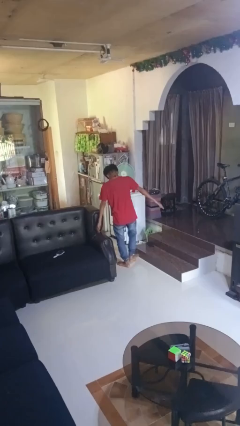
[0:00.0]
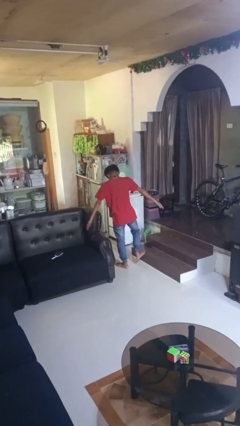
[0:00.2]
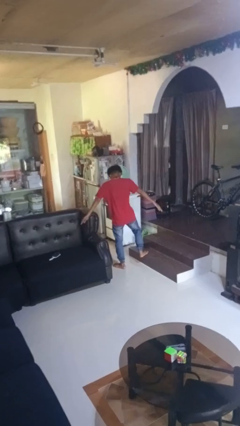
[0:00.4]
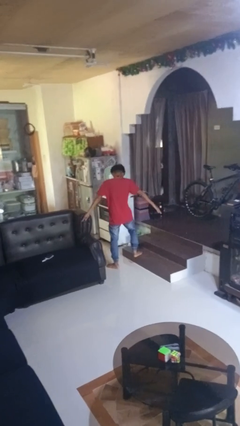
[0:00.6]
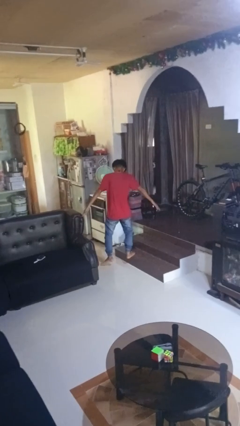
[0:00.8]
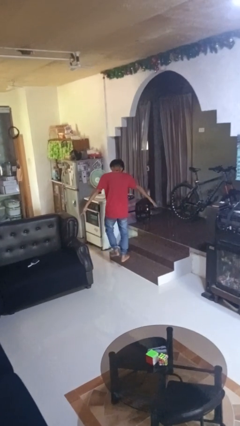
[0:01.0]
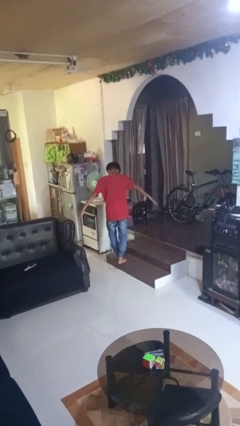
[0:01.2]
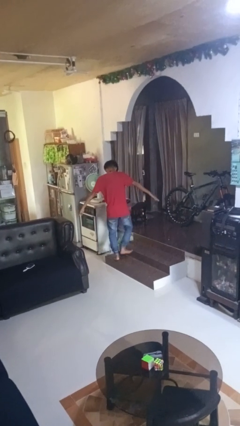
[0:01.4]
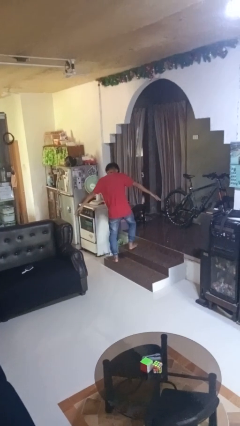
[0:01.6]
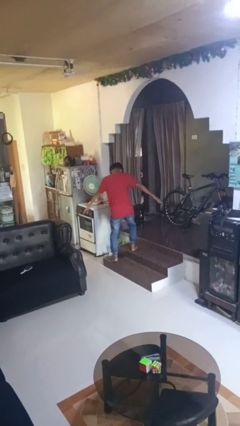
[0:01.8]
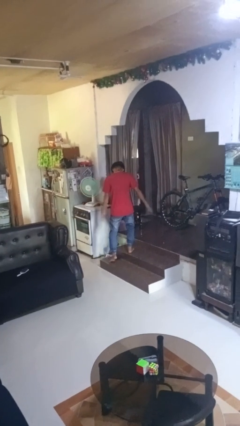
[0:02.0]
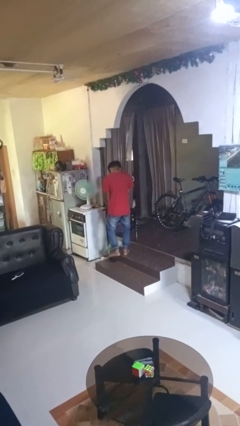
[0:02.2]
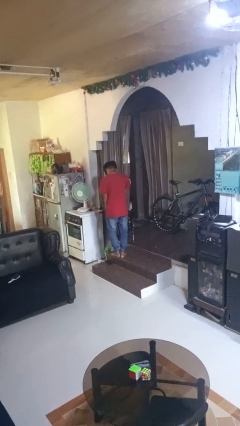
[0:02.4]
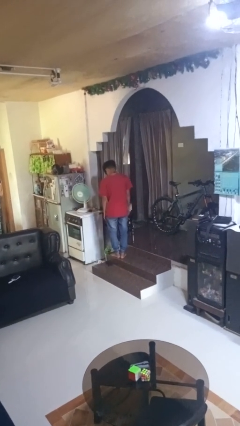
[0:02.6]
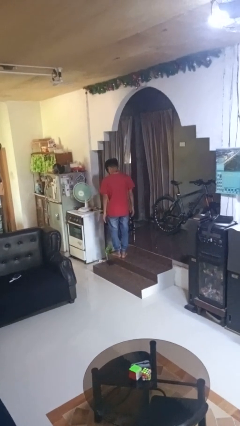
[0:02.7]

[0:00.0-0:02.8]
person walks tiptoe

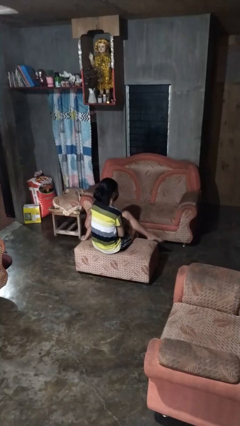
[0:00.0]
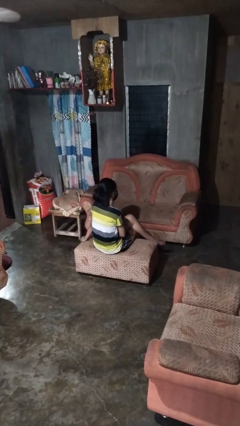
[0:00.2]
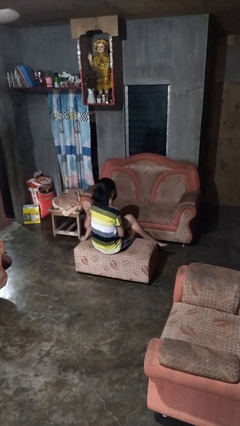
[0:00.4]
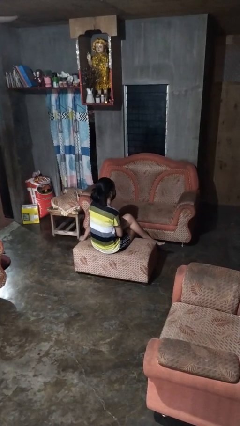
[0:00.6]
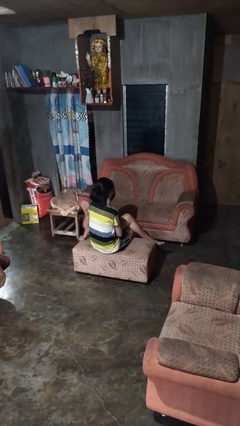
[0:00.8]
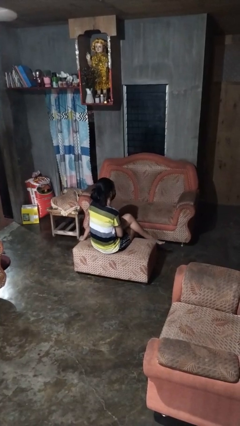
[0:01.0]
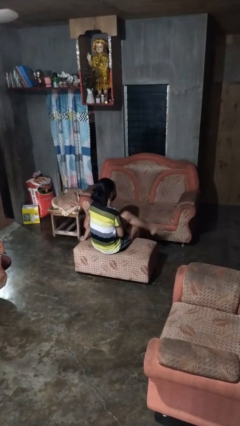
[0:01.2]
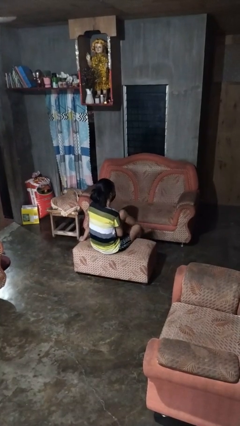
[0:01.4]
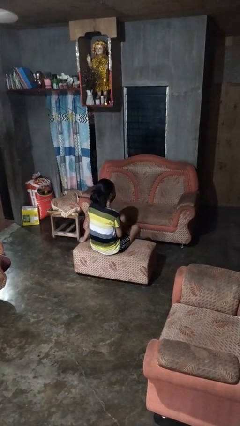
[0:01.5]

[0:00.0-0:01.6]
person crosses legs

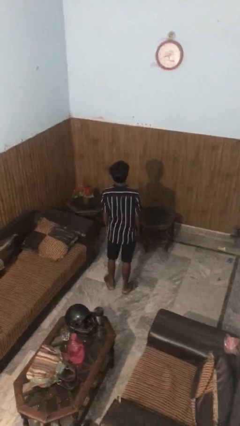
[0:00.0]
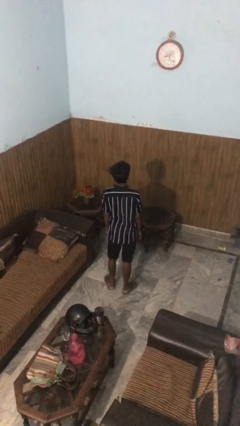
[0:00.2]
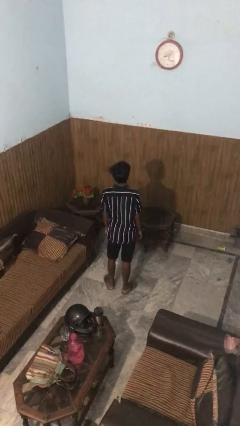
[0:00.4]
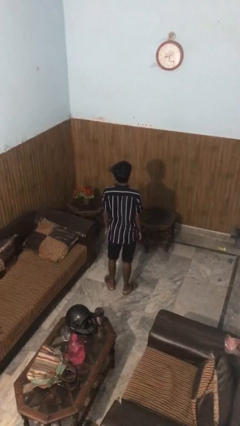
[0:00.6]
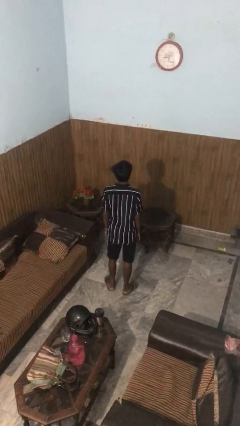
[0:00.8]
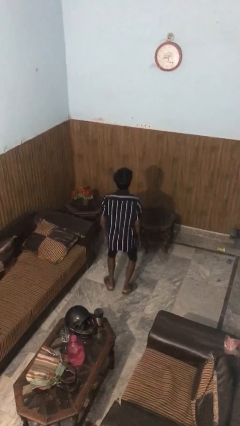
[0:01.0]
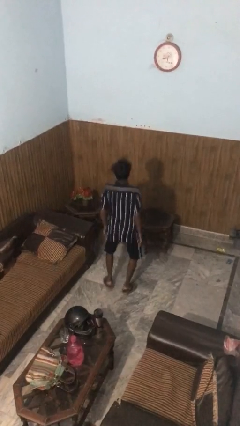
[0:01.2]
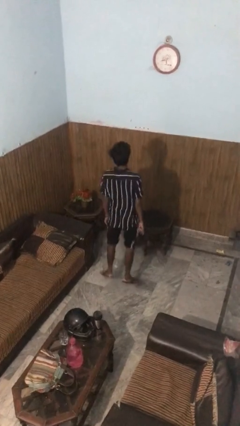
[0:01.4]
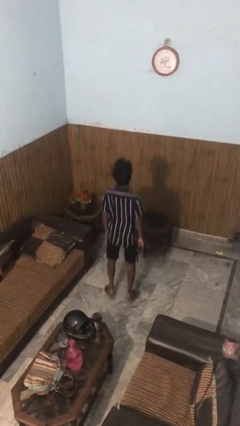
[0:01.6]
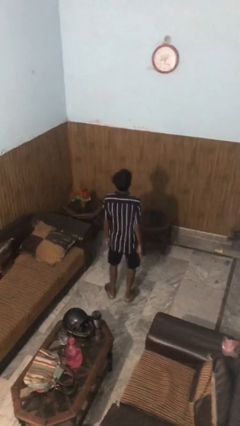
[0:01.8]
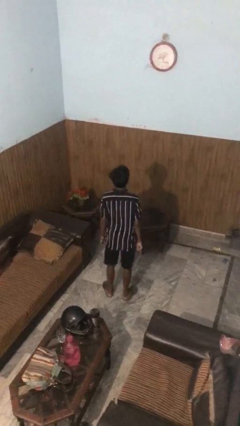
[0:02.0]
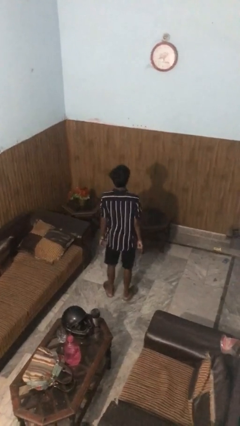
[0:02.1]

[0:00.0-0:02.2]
person jumps

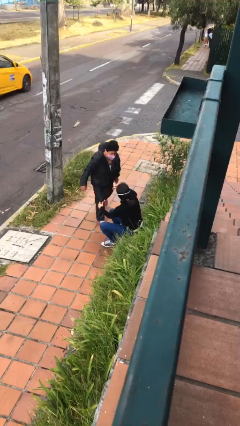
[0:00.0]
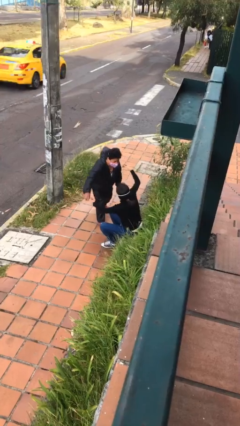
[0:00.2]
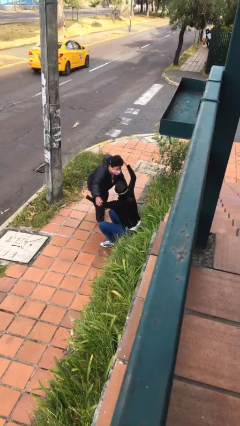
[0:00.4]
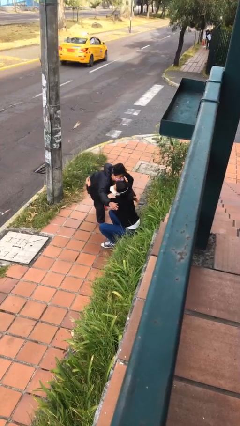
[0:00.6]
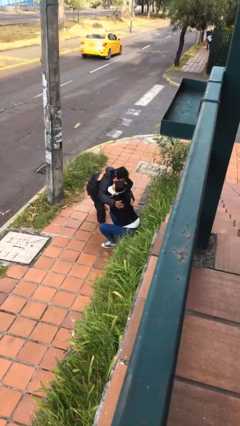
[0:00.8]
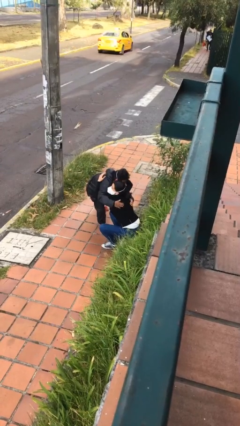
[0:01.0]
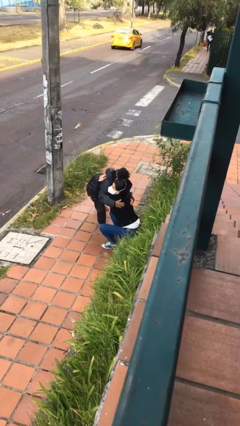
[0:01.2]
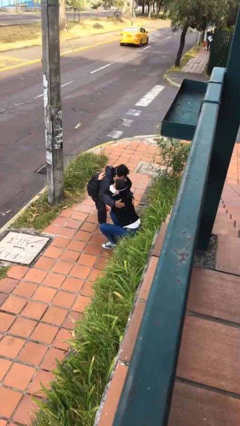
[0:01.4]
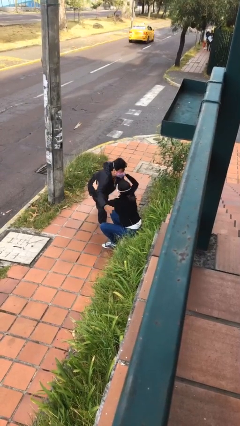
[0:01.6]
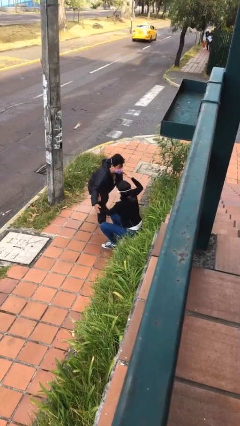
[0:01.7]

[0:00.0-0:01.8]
person embraces person

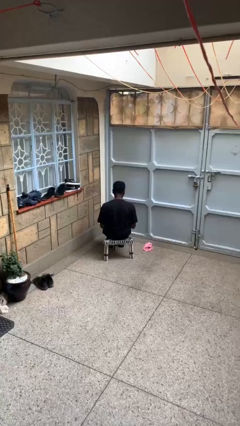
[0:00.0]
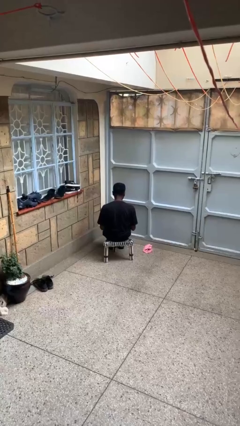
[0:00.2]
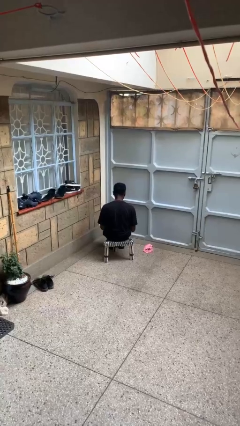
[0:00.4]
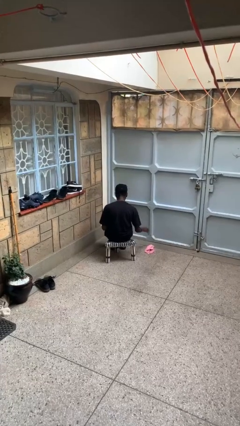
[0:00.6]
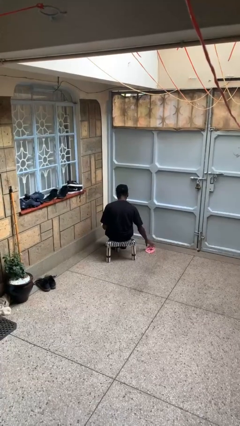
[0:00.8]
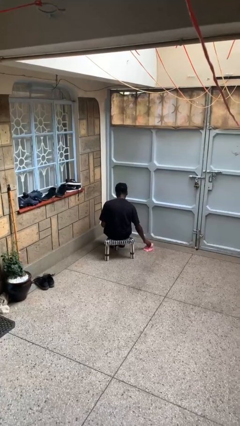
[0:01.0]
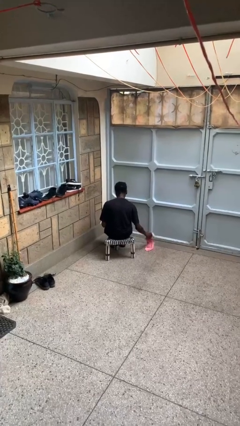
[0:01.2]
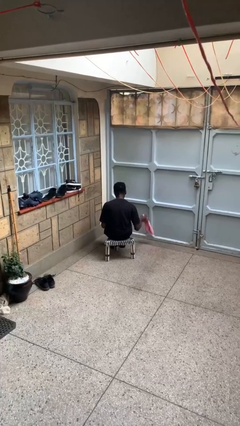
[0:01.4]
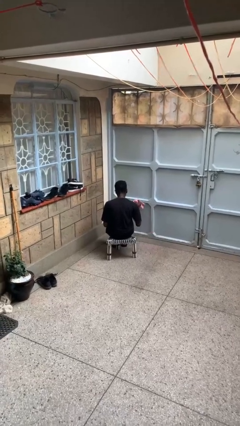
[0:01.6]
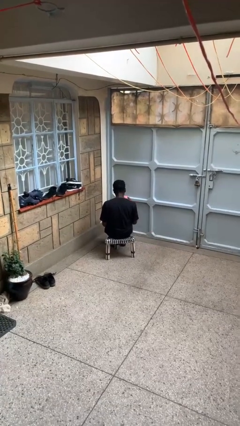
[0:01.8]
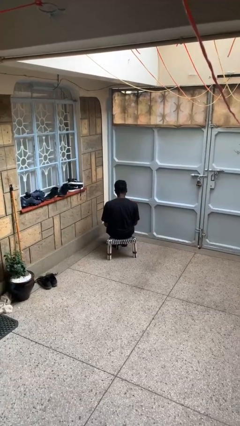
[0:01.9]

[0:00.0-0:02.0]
person picks up object from floor

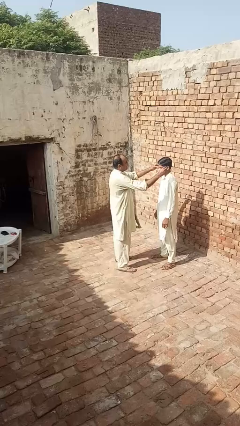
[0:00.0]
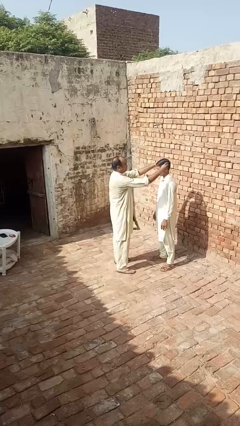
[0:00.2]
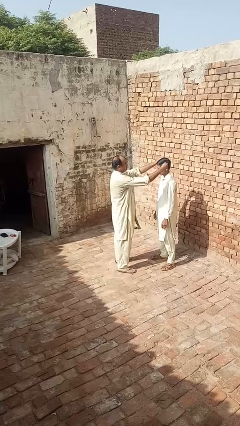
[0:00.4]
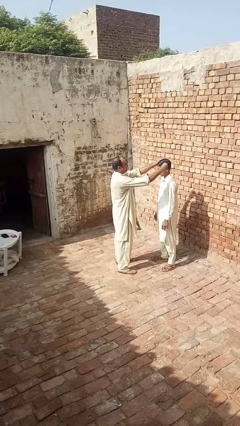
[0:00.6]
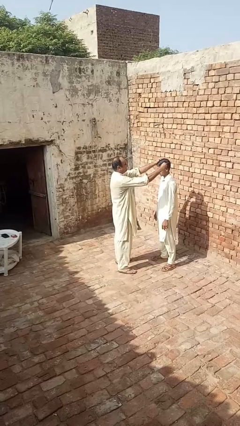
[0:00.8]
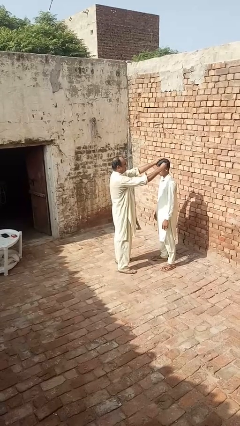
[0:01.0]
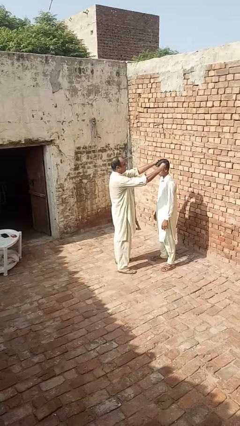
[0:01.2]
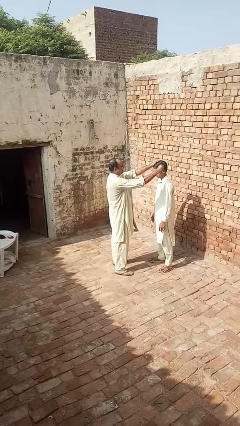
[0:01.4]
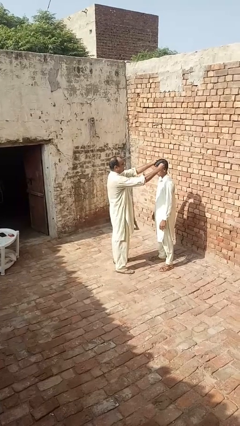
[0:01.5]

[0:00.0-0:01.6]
person grabs person by hair

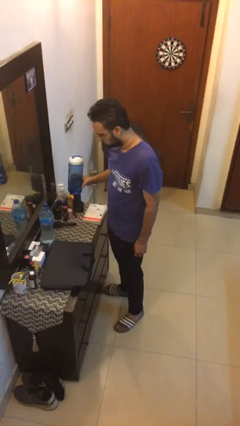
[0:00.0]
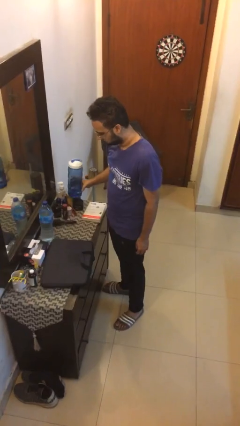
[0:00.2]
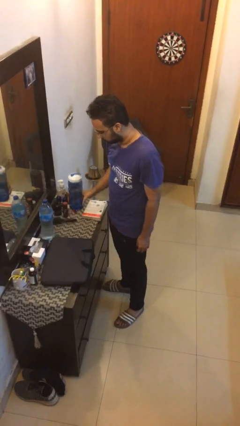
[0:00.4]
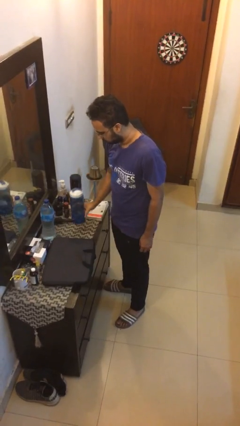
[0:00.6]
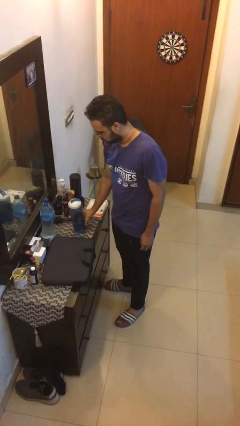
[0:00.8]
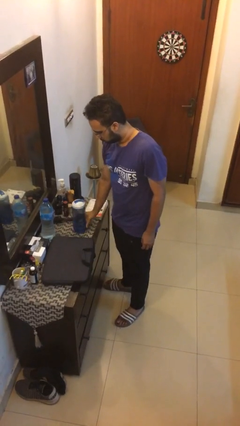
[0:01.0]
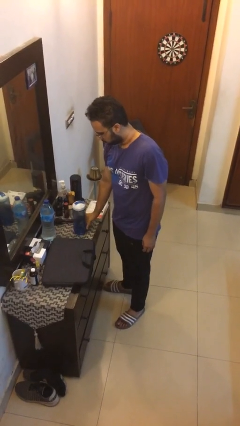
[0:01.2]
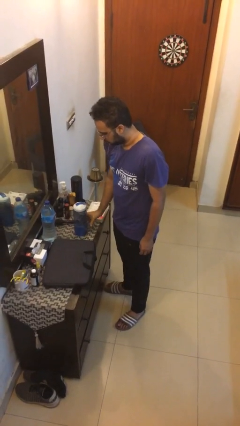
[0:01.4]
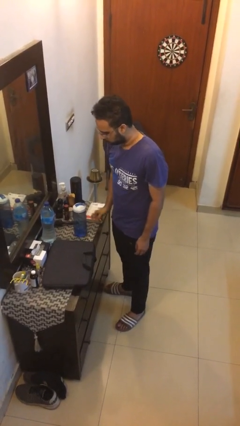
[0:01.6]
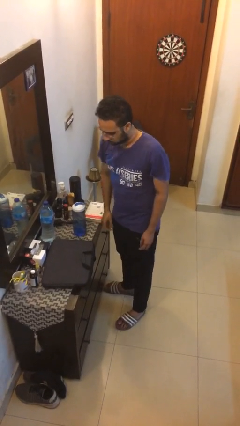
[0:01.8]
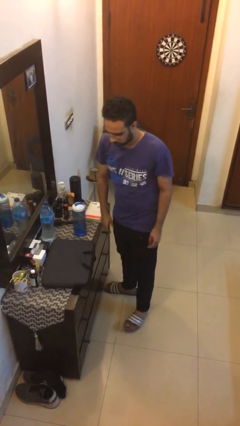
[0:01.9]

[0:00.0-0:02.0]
person puts down object on table

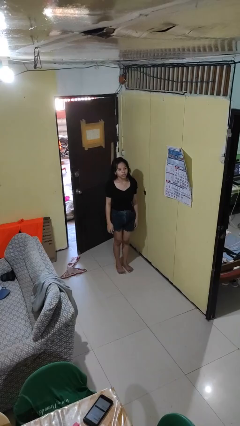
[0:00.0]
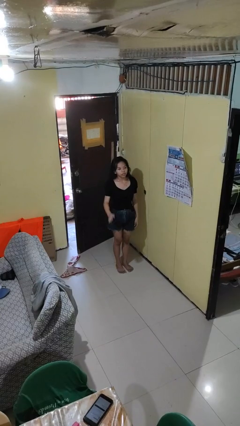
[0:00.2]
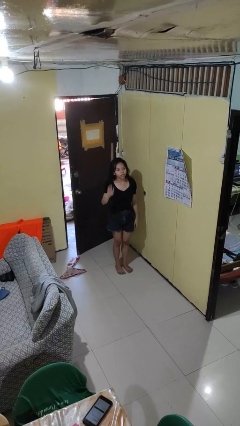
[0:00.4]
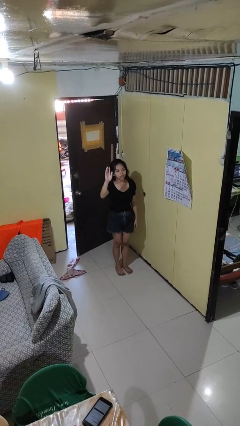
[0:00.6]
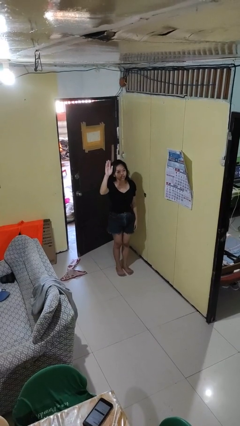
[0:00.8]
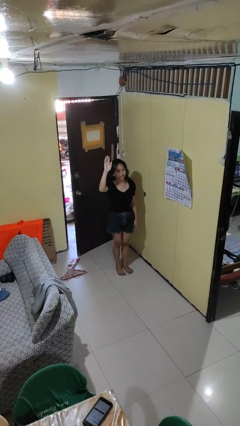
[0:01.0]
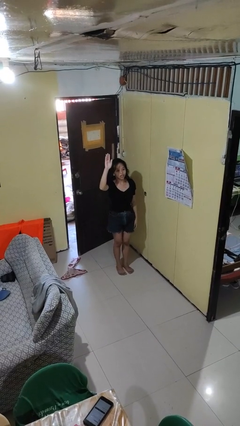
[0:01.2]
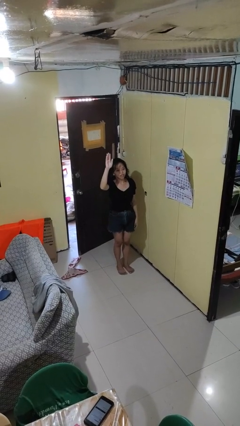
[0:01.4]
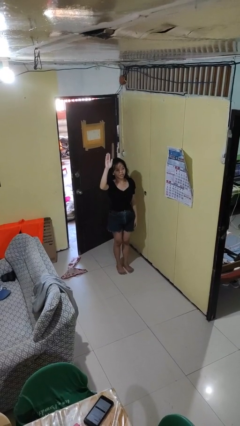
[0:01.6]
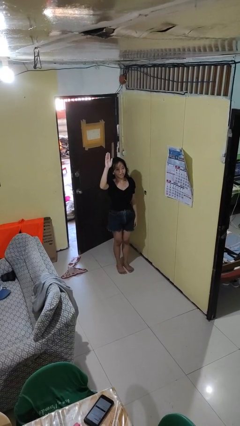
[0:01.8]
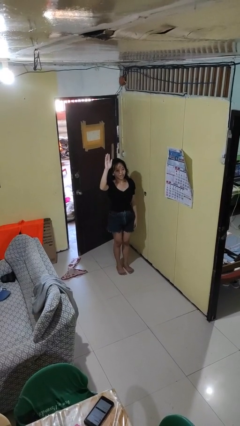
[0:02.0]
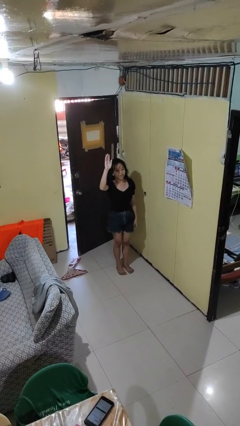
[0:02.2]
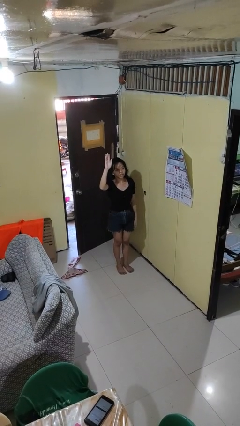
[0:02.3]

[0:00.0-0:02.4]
person gestures raise hand

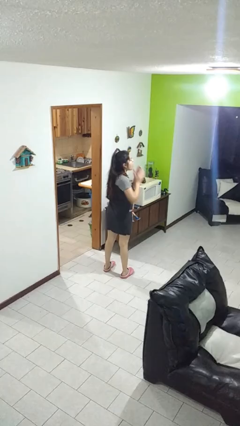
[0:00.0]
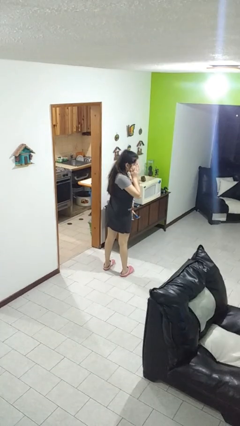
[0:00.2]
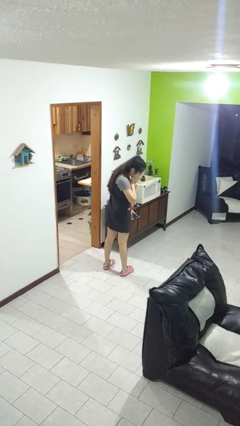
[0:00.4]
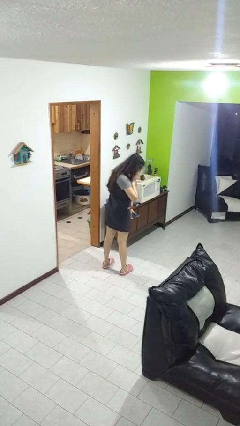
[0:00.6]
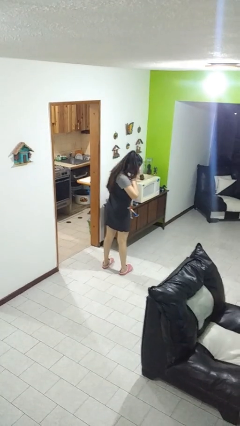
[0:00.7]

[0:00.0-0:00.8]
person sneezes into hand
